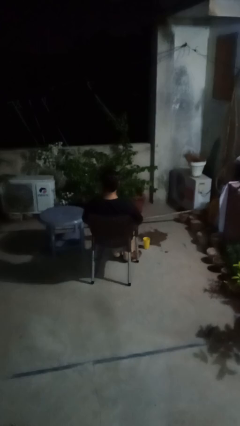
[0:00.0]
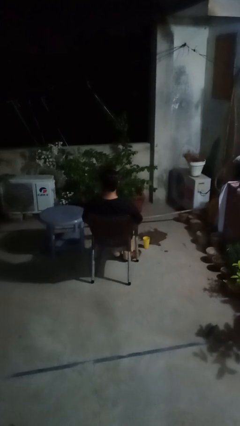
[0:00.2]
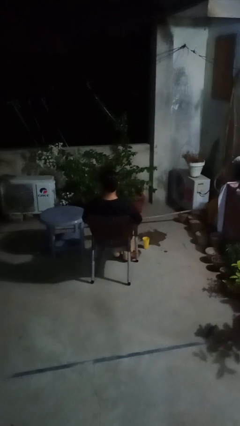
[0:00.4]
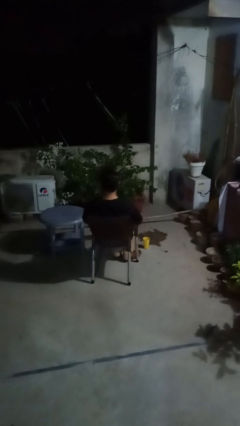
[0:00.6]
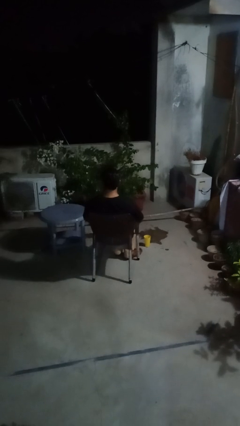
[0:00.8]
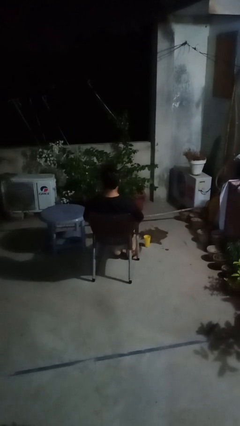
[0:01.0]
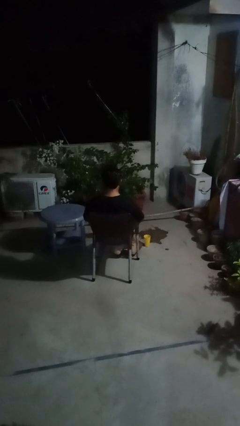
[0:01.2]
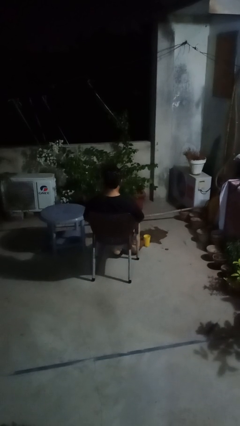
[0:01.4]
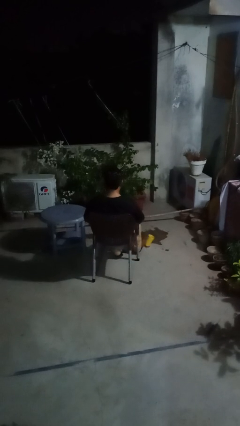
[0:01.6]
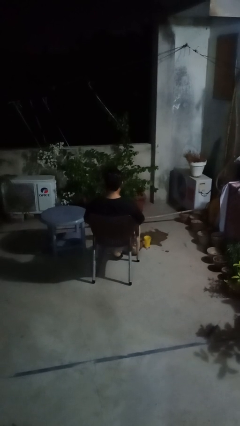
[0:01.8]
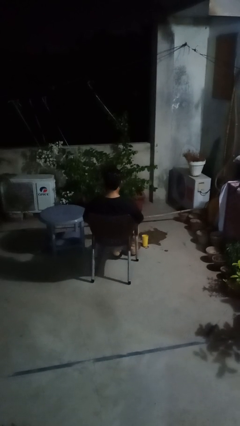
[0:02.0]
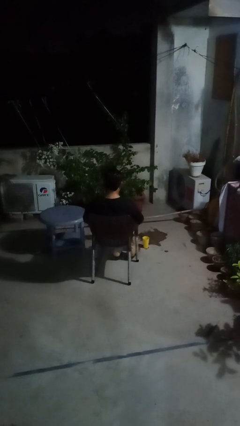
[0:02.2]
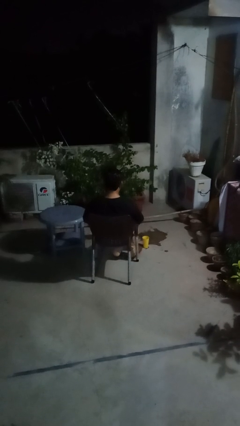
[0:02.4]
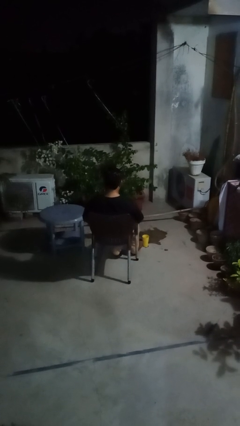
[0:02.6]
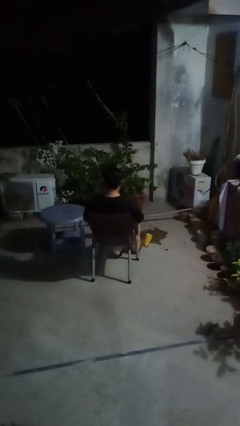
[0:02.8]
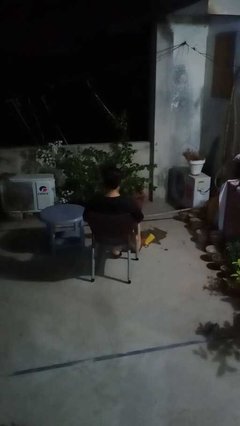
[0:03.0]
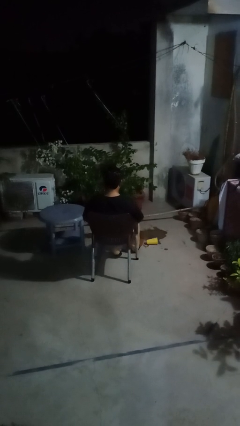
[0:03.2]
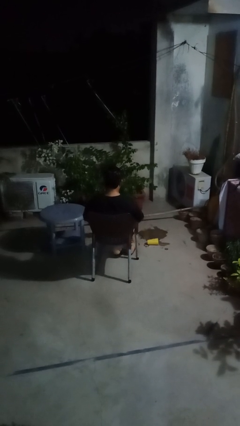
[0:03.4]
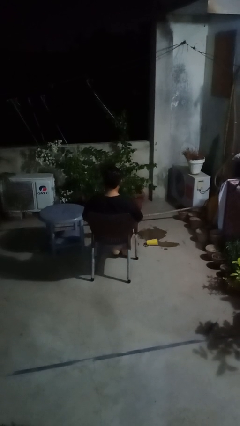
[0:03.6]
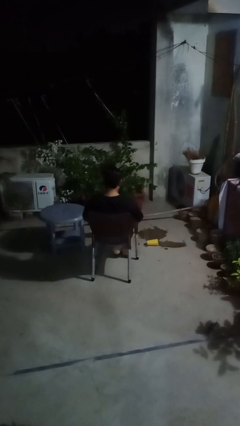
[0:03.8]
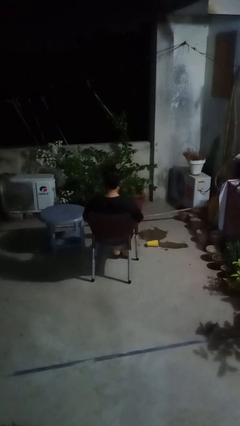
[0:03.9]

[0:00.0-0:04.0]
person spills on floor

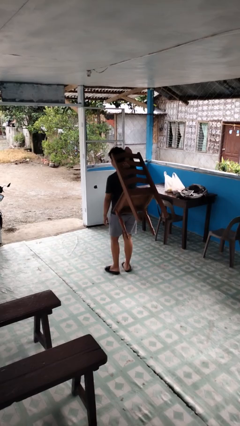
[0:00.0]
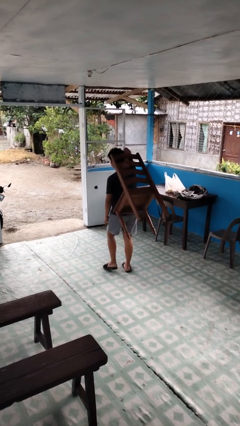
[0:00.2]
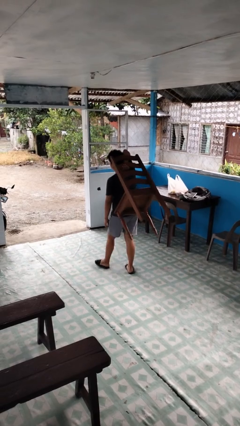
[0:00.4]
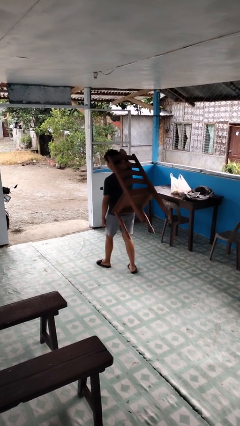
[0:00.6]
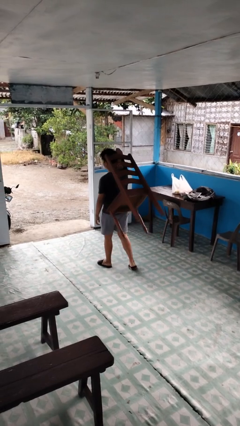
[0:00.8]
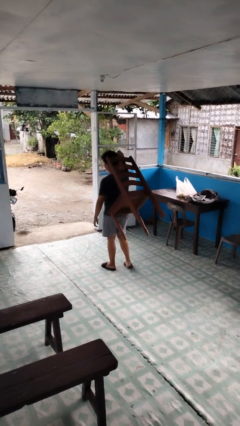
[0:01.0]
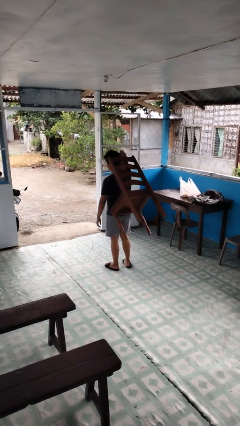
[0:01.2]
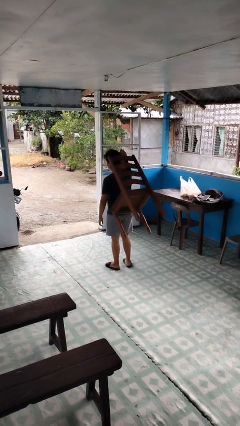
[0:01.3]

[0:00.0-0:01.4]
person carries furniture

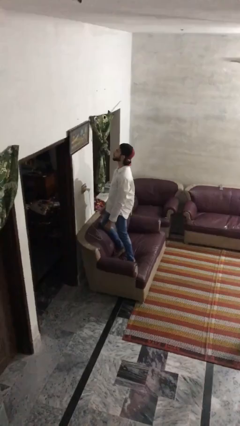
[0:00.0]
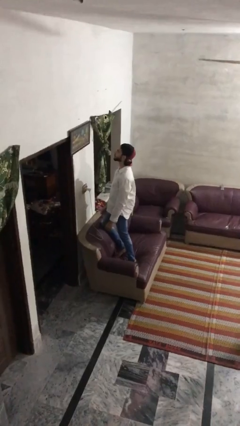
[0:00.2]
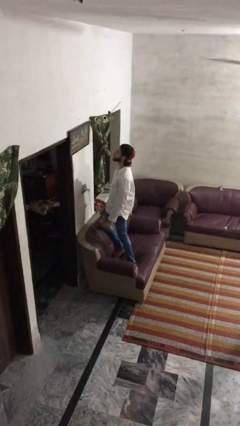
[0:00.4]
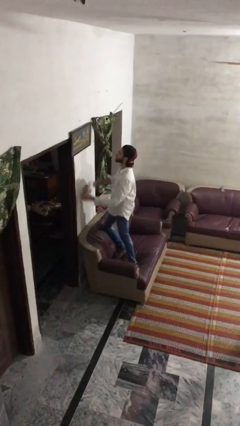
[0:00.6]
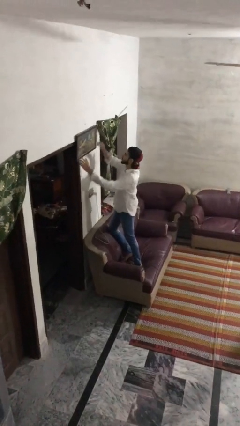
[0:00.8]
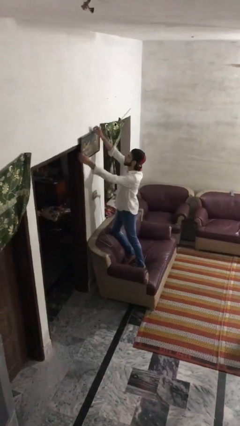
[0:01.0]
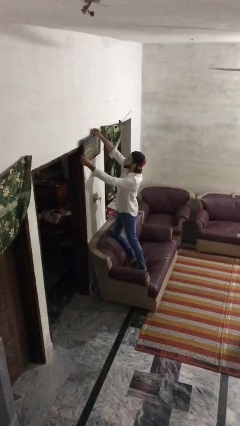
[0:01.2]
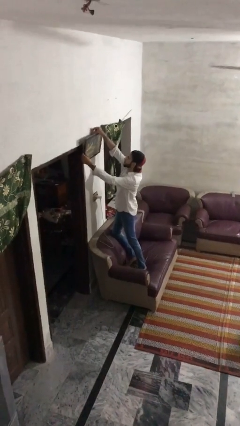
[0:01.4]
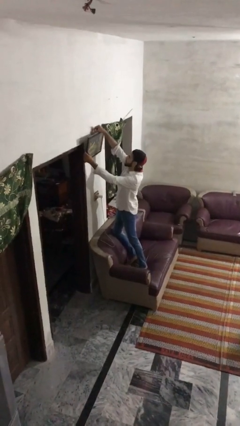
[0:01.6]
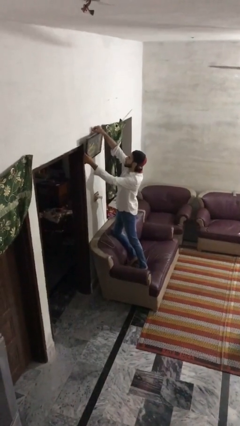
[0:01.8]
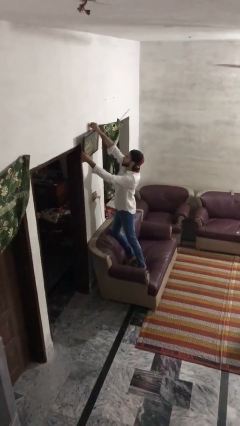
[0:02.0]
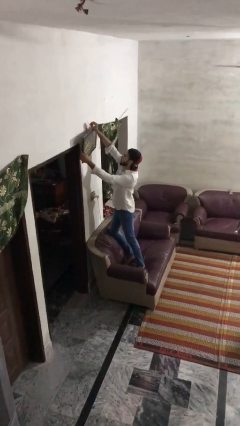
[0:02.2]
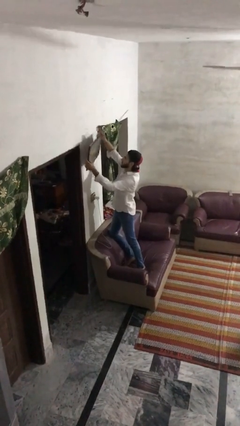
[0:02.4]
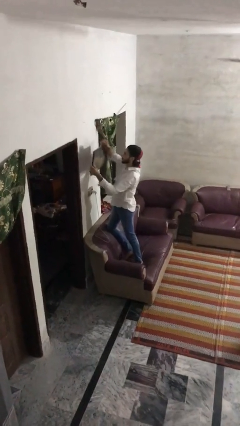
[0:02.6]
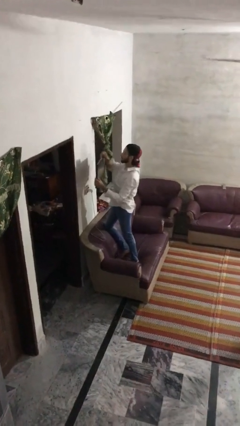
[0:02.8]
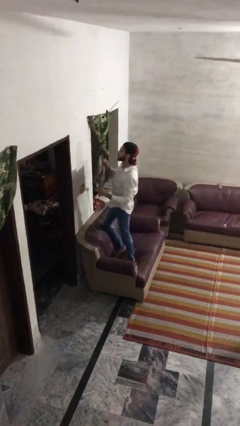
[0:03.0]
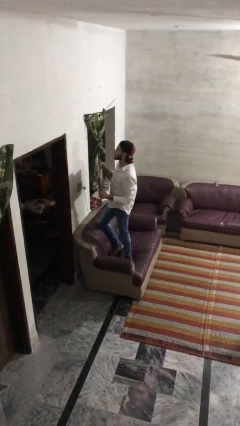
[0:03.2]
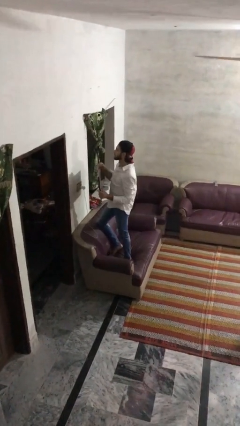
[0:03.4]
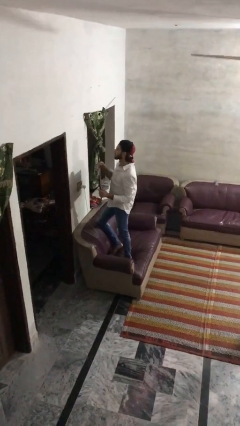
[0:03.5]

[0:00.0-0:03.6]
person takes down picture frame

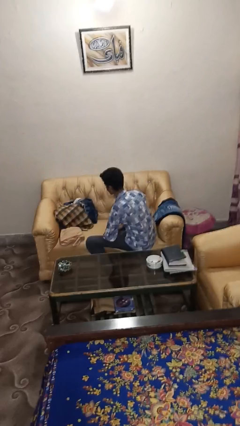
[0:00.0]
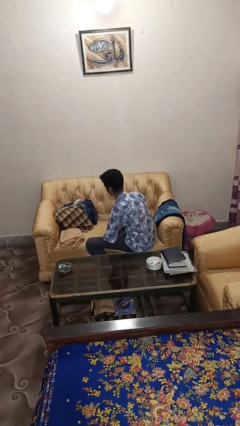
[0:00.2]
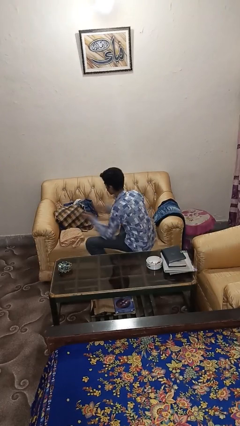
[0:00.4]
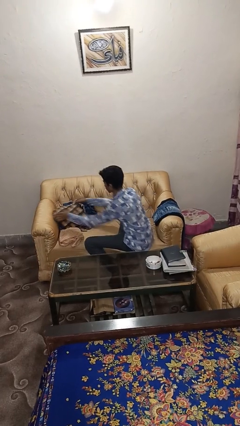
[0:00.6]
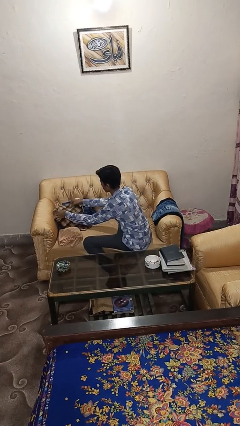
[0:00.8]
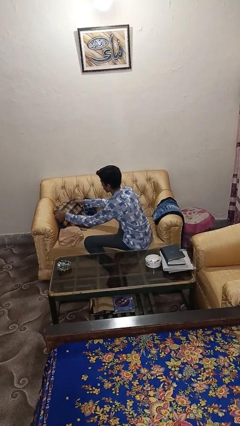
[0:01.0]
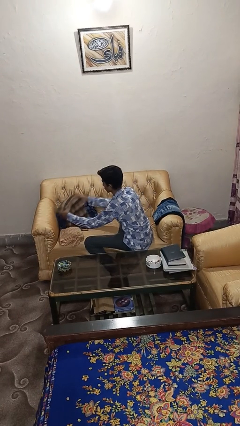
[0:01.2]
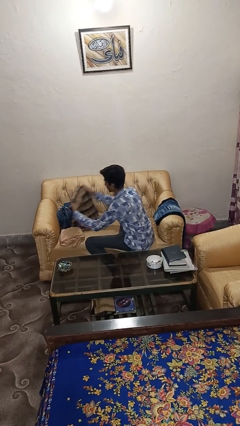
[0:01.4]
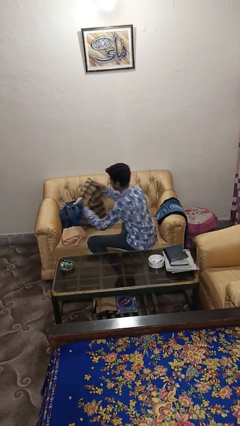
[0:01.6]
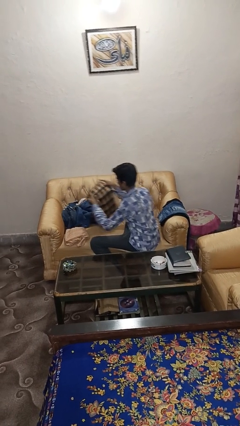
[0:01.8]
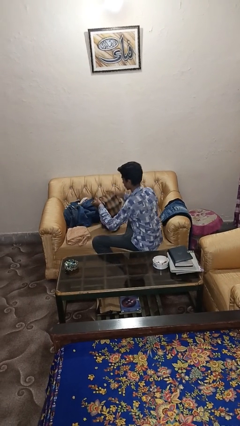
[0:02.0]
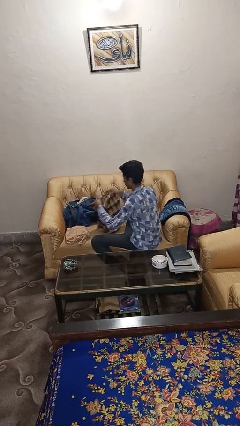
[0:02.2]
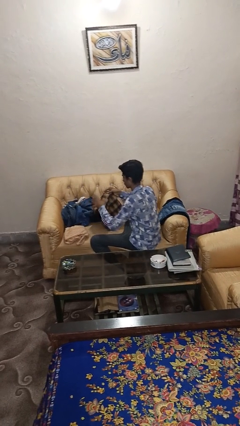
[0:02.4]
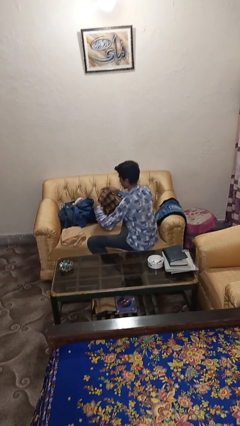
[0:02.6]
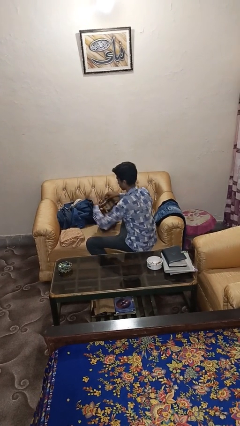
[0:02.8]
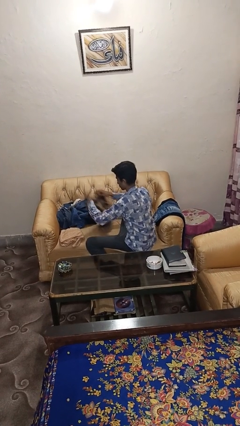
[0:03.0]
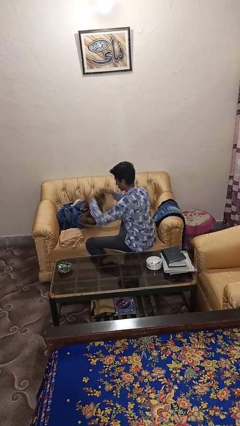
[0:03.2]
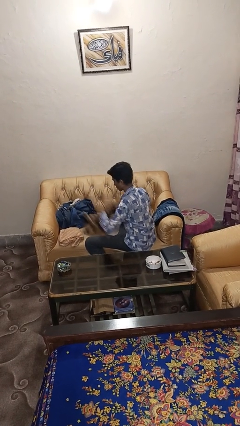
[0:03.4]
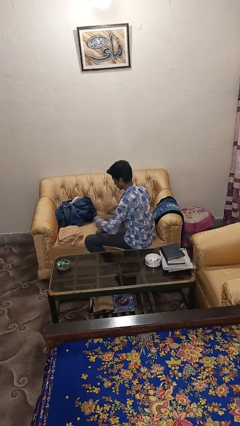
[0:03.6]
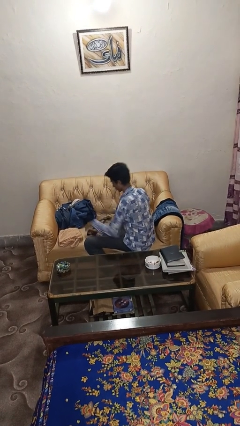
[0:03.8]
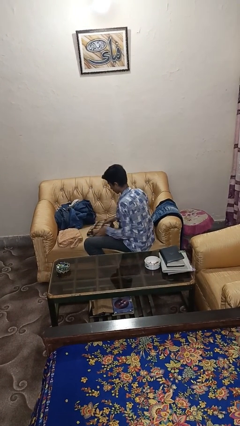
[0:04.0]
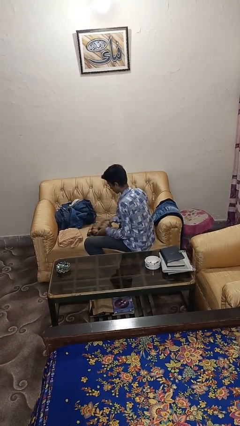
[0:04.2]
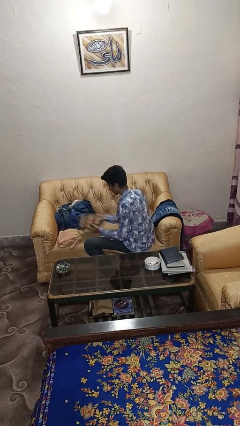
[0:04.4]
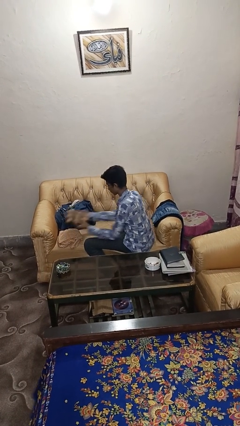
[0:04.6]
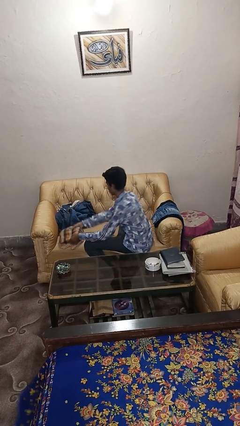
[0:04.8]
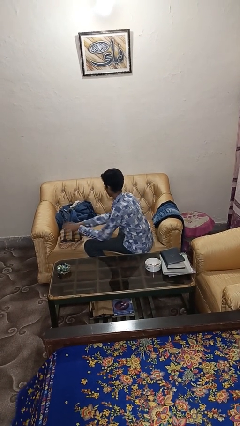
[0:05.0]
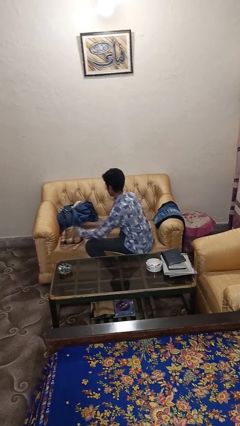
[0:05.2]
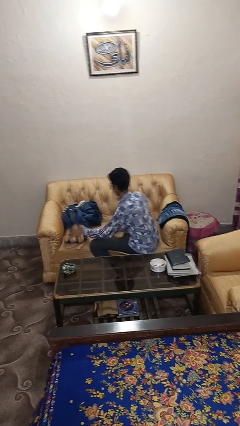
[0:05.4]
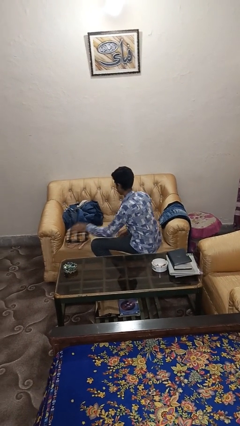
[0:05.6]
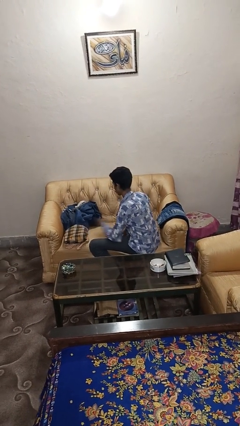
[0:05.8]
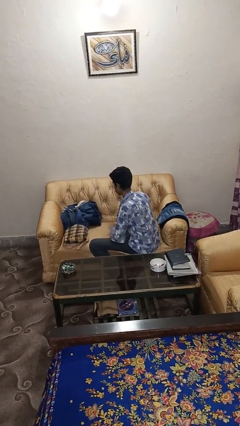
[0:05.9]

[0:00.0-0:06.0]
person folds shirt

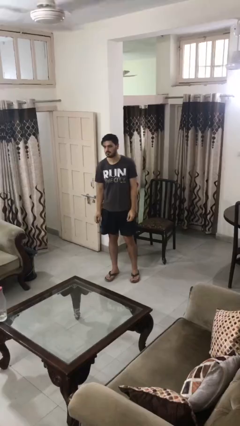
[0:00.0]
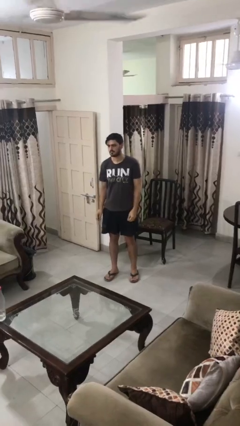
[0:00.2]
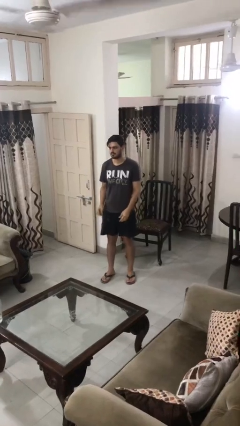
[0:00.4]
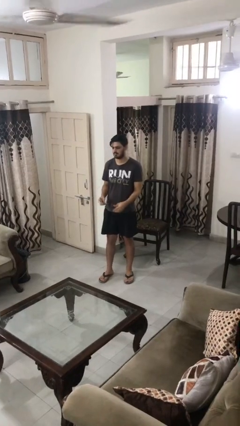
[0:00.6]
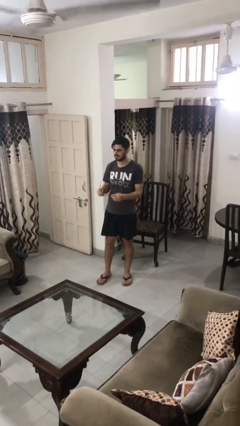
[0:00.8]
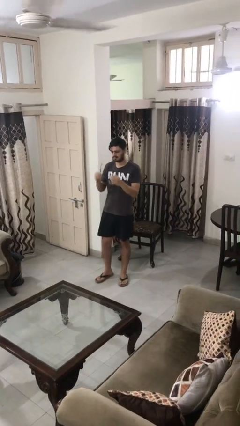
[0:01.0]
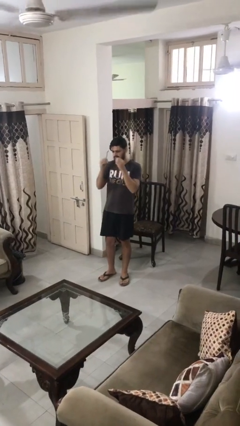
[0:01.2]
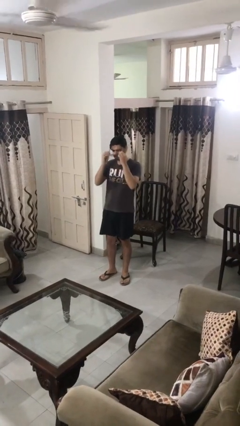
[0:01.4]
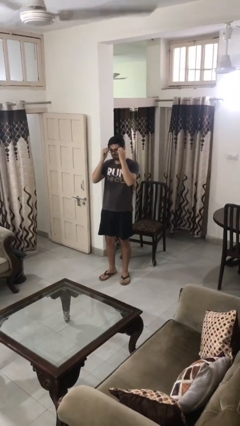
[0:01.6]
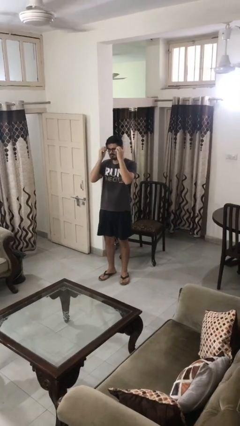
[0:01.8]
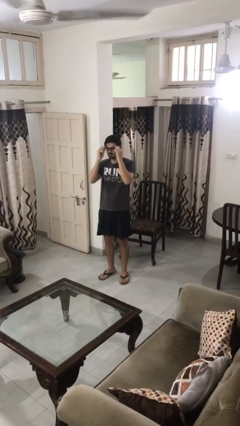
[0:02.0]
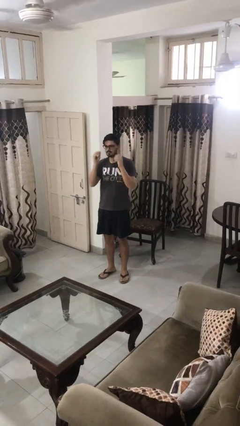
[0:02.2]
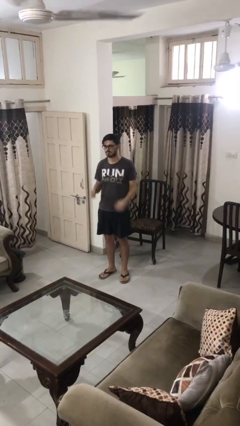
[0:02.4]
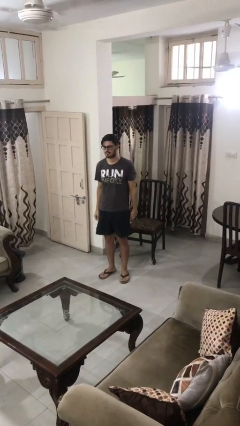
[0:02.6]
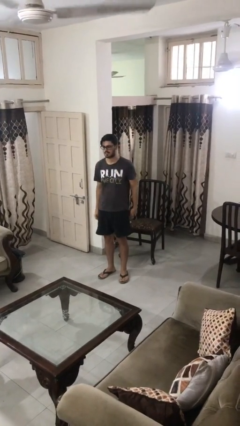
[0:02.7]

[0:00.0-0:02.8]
person puts on glasses
